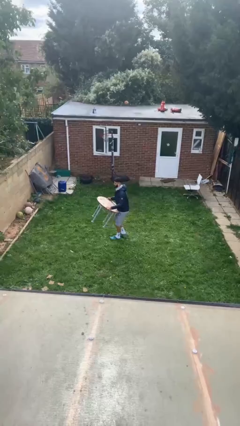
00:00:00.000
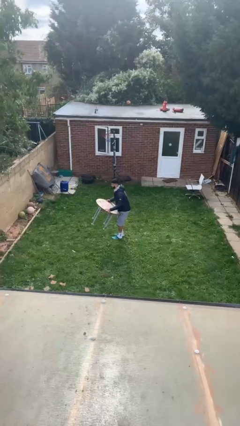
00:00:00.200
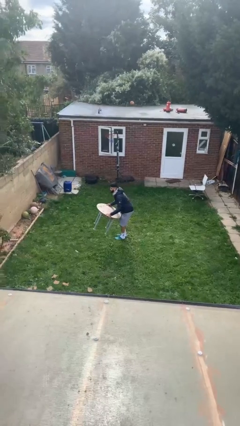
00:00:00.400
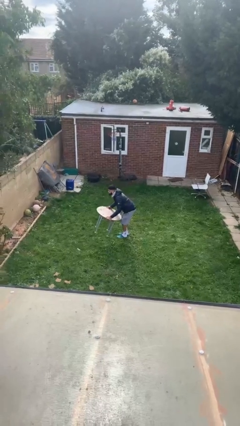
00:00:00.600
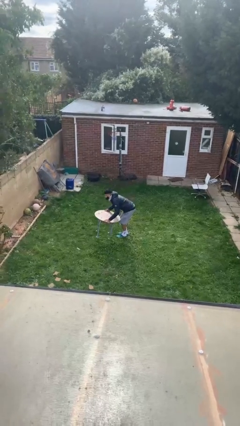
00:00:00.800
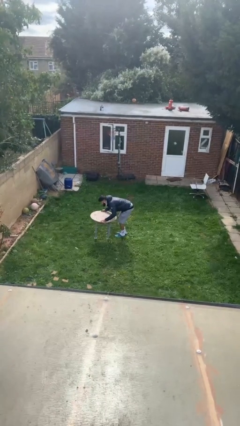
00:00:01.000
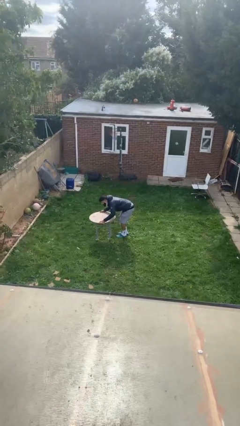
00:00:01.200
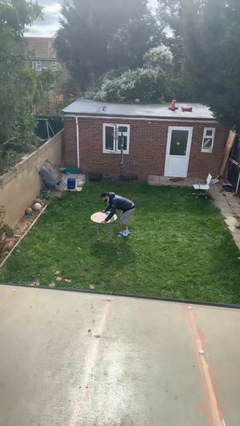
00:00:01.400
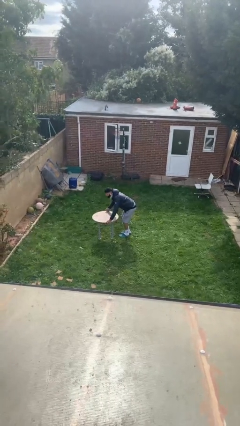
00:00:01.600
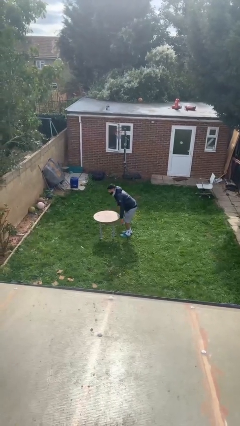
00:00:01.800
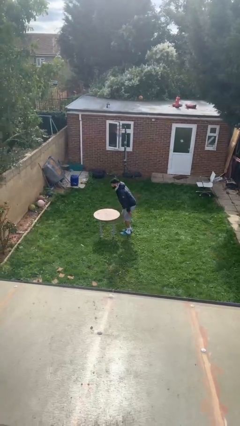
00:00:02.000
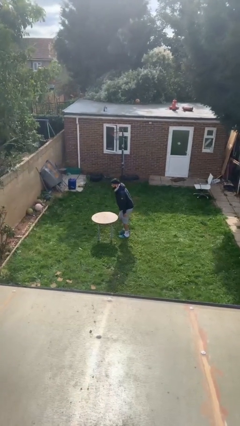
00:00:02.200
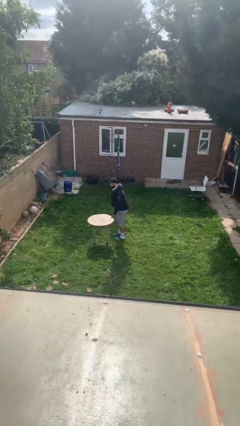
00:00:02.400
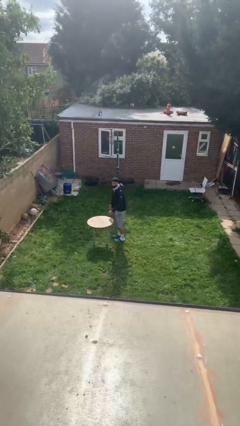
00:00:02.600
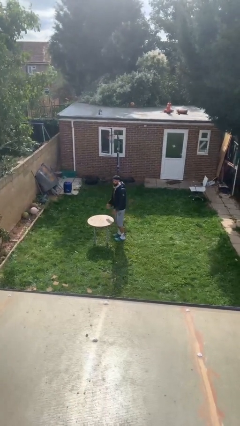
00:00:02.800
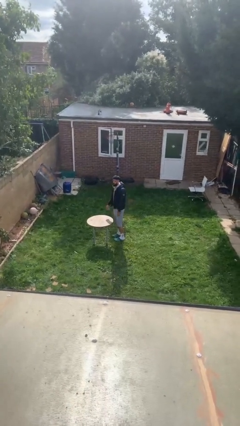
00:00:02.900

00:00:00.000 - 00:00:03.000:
person puts down object on floor

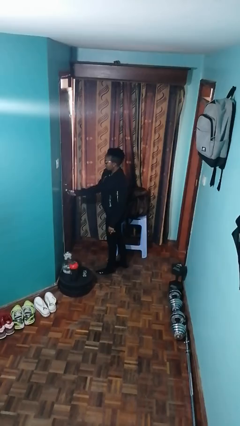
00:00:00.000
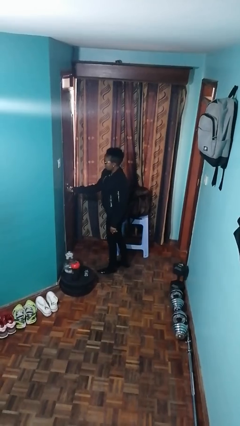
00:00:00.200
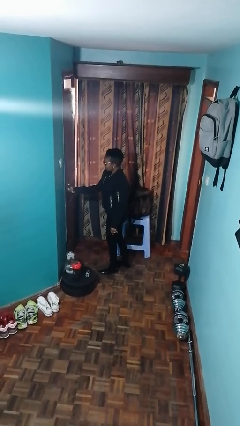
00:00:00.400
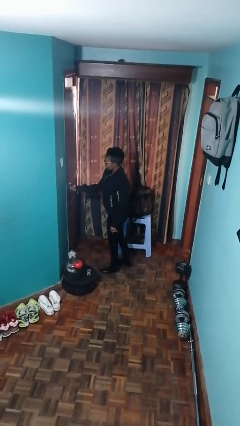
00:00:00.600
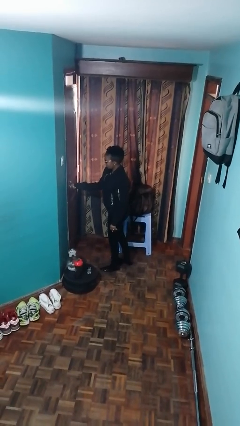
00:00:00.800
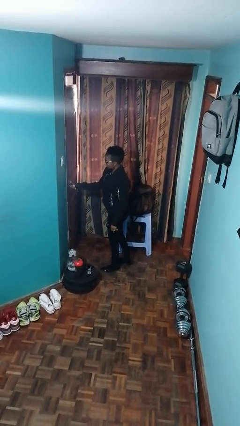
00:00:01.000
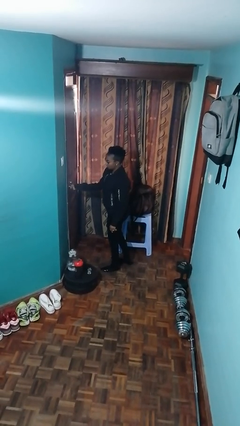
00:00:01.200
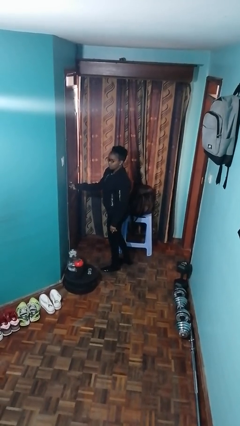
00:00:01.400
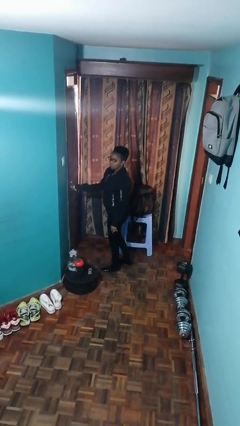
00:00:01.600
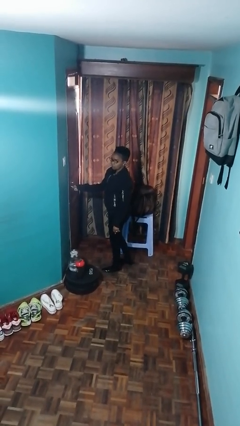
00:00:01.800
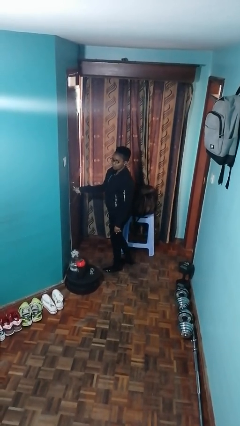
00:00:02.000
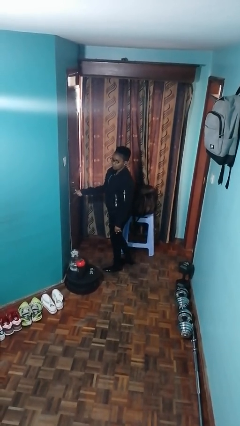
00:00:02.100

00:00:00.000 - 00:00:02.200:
person locks door with keys

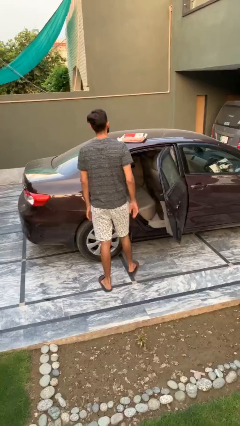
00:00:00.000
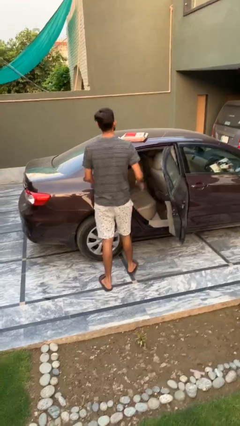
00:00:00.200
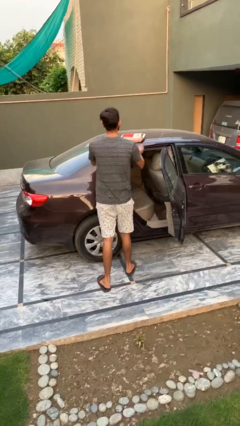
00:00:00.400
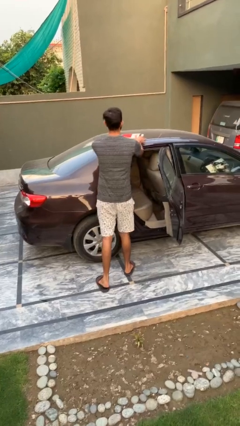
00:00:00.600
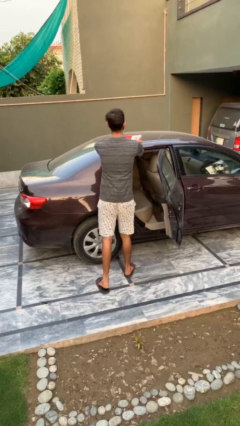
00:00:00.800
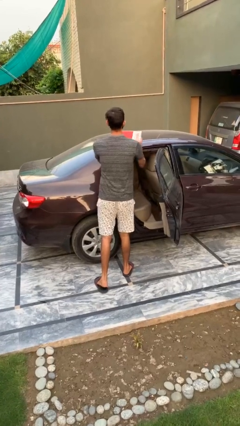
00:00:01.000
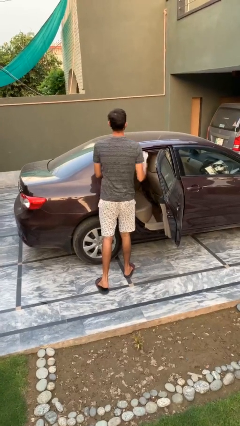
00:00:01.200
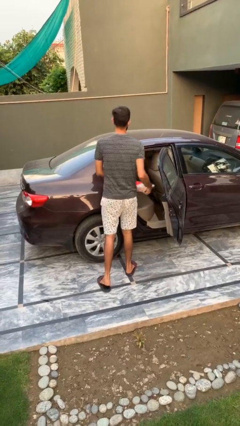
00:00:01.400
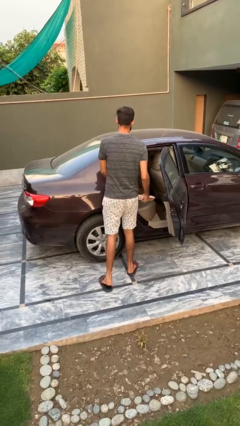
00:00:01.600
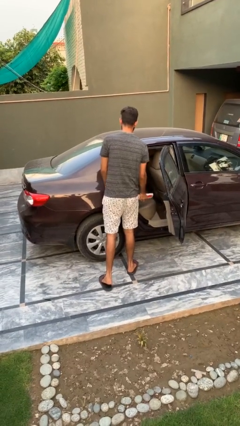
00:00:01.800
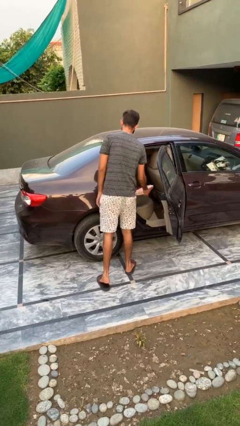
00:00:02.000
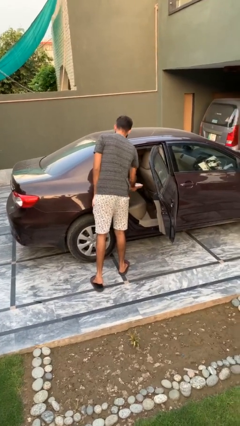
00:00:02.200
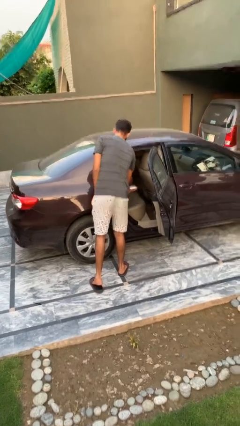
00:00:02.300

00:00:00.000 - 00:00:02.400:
person loads car

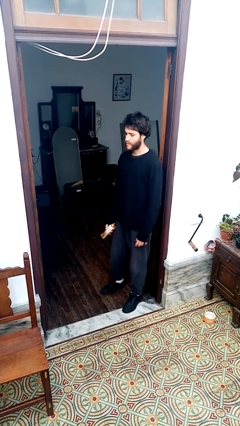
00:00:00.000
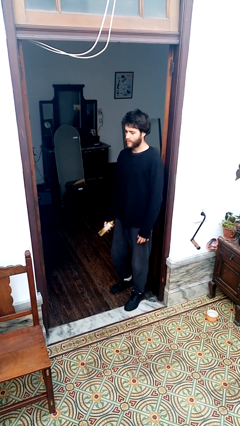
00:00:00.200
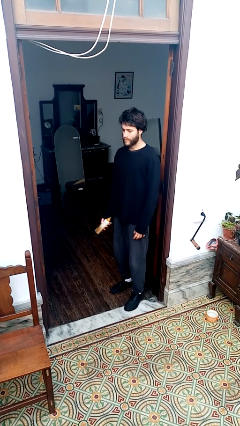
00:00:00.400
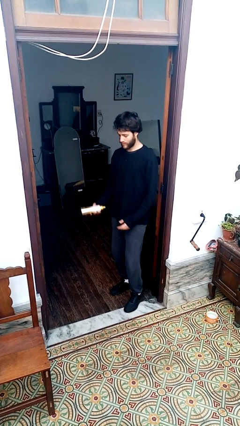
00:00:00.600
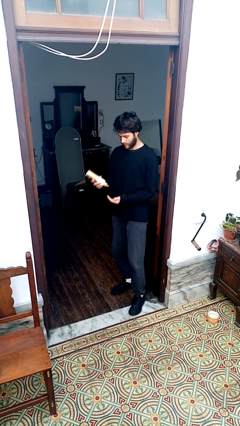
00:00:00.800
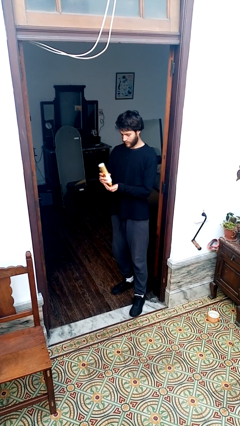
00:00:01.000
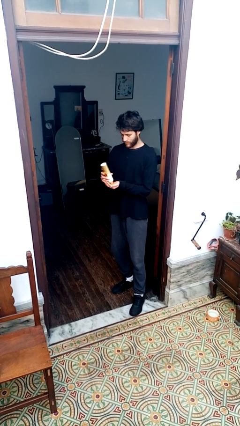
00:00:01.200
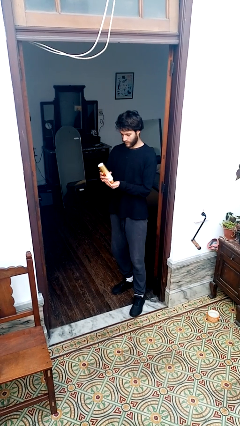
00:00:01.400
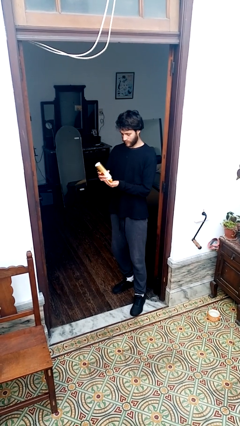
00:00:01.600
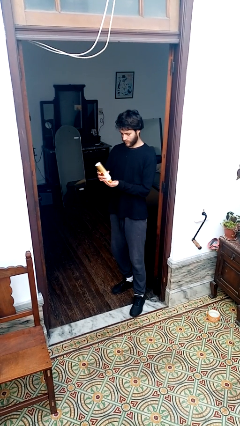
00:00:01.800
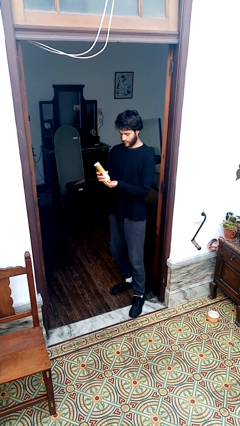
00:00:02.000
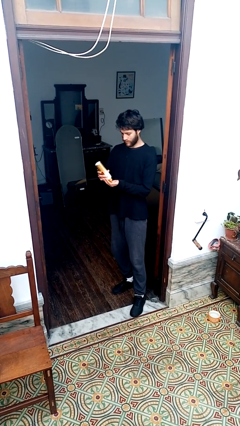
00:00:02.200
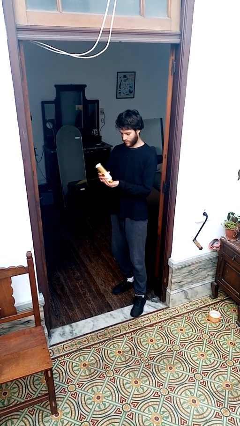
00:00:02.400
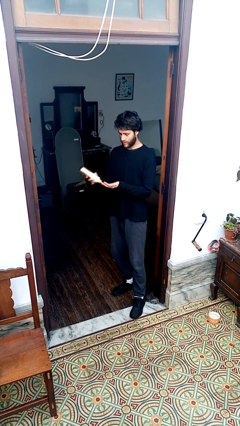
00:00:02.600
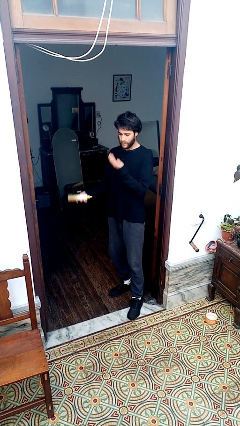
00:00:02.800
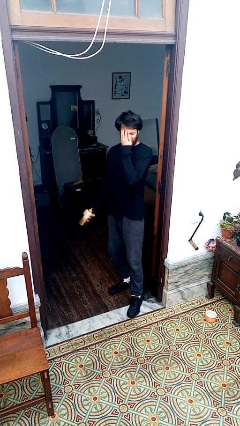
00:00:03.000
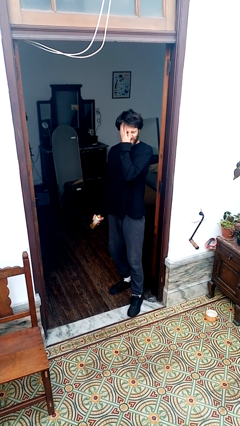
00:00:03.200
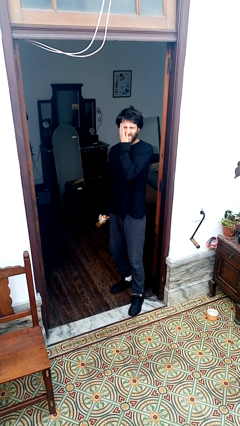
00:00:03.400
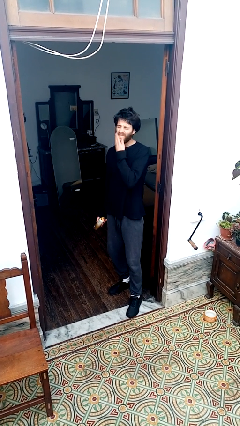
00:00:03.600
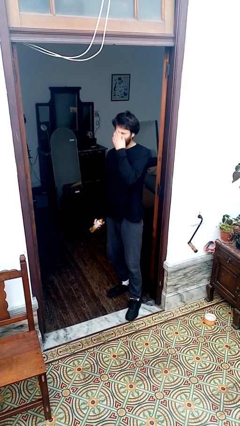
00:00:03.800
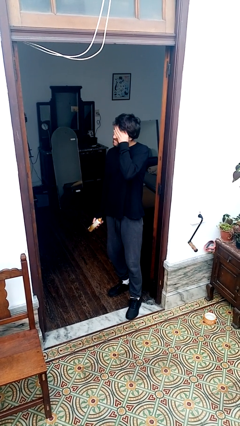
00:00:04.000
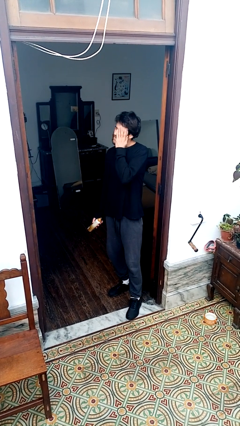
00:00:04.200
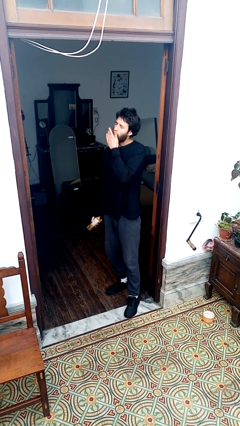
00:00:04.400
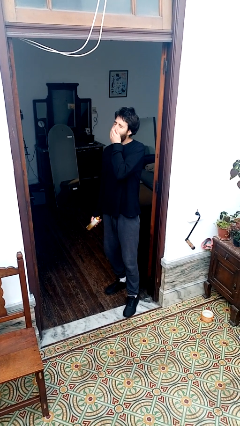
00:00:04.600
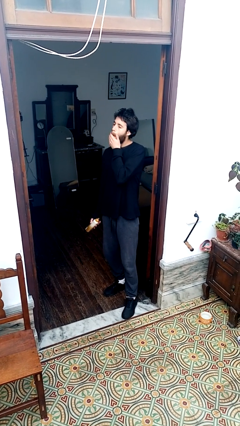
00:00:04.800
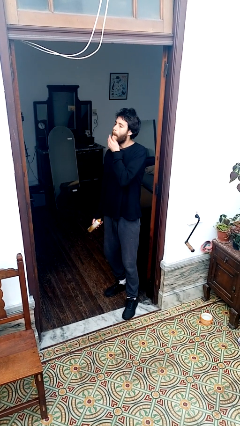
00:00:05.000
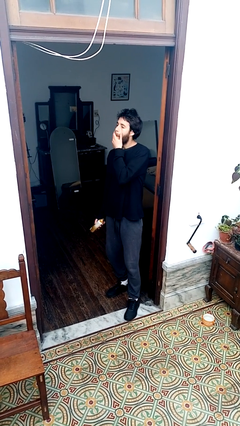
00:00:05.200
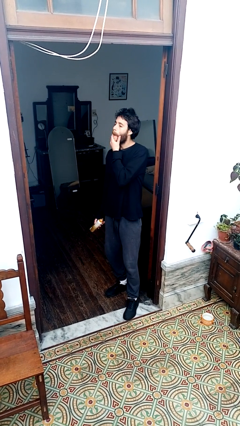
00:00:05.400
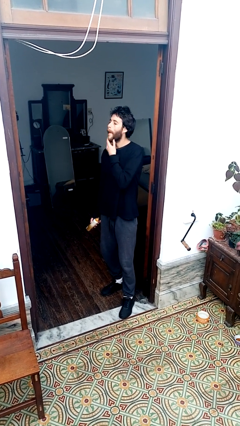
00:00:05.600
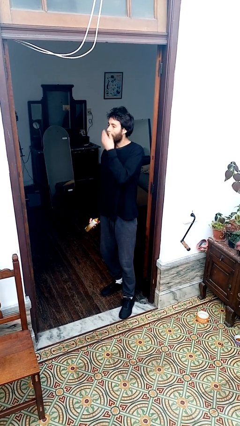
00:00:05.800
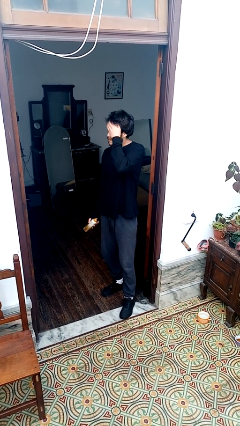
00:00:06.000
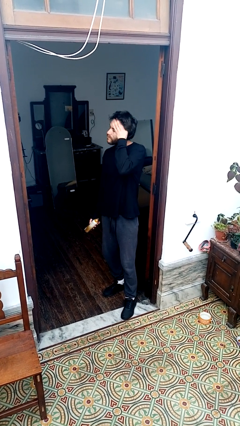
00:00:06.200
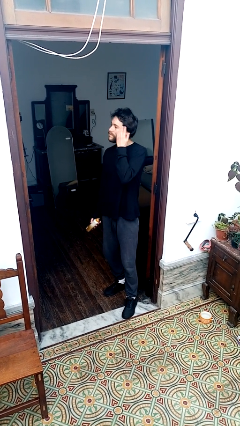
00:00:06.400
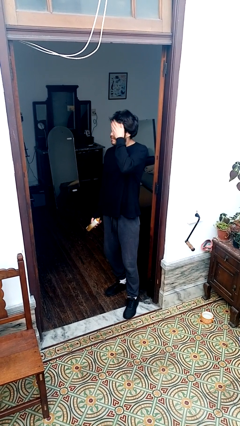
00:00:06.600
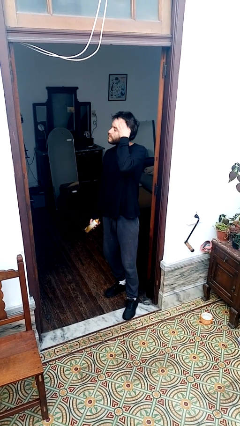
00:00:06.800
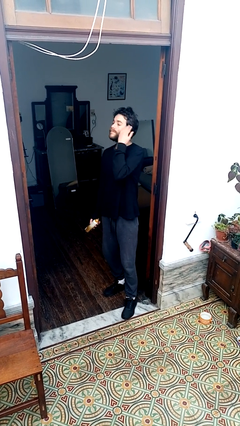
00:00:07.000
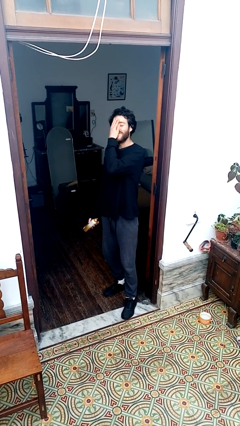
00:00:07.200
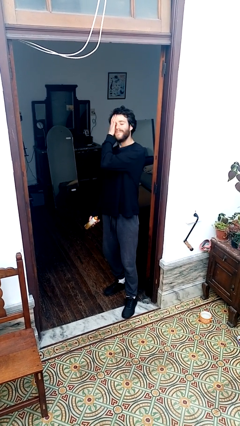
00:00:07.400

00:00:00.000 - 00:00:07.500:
person applies facial moisturizer

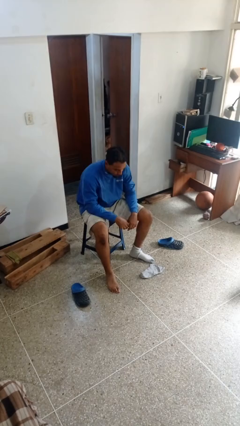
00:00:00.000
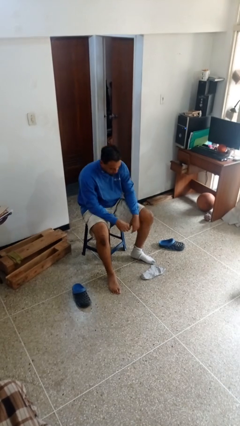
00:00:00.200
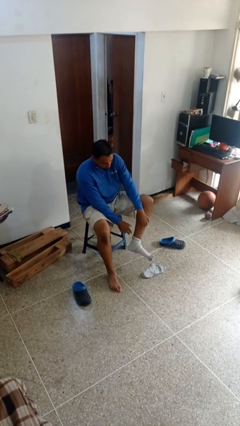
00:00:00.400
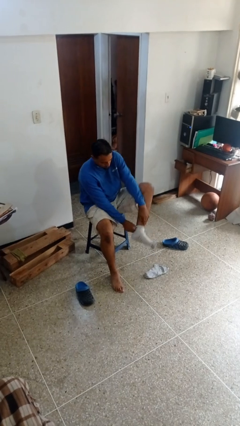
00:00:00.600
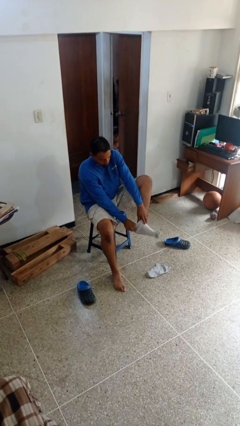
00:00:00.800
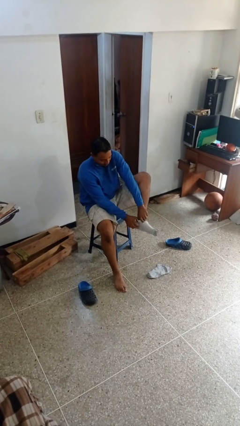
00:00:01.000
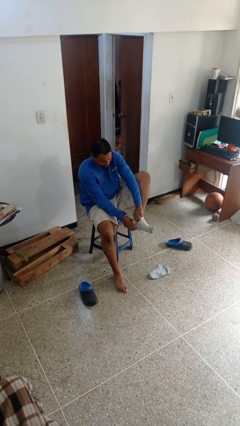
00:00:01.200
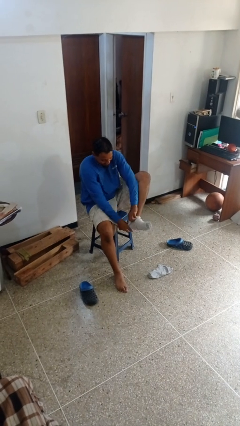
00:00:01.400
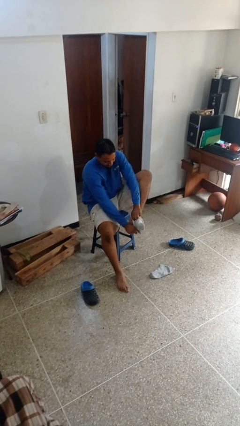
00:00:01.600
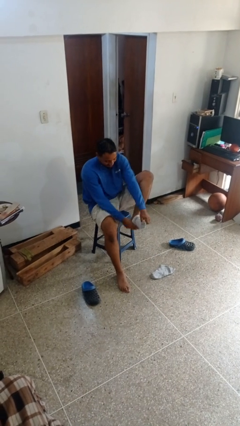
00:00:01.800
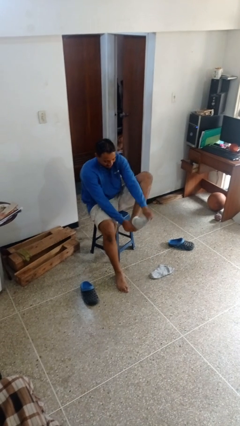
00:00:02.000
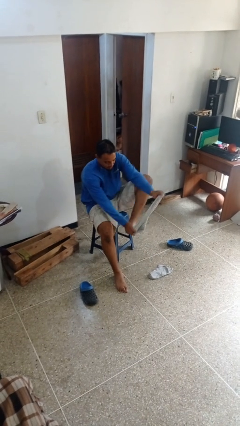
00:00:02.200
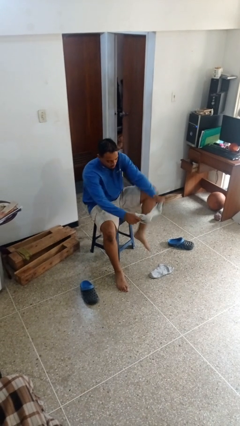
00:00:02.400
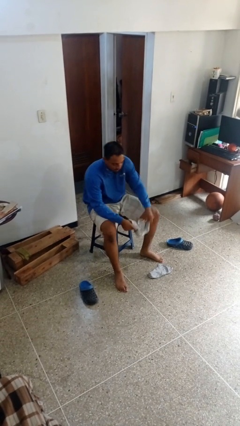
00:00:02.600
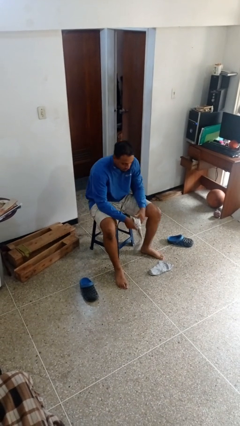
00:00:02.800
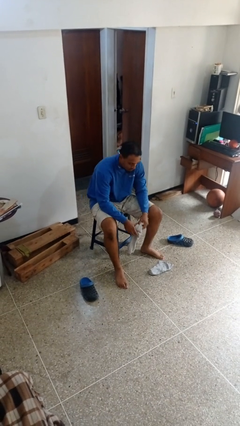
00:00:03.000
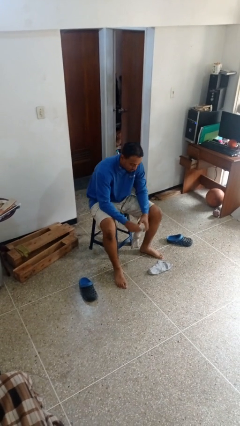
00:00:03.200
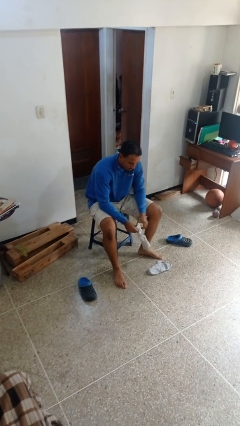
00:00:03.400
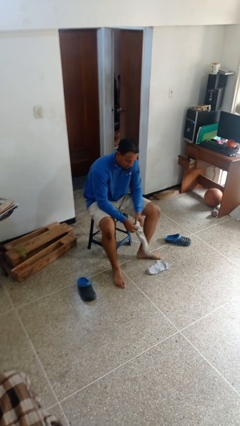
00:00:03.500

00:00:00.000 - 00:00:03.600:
person takes off socks
